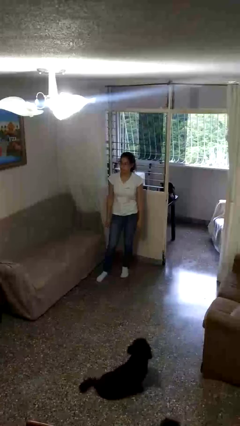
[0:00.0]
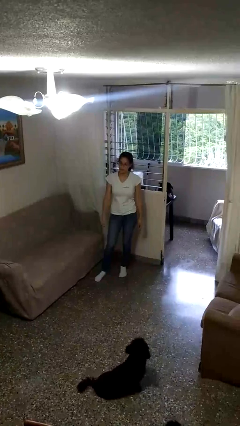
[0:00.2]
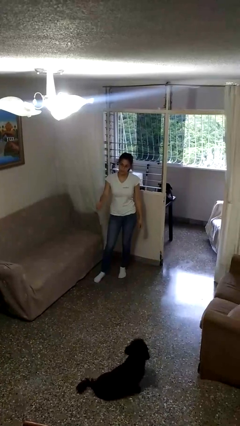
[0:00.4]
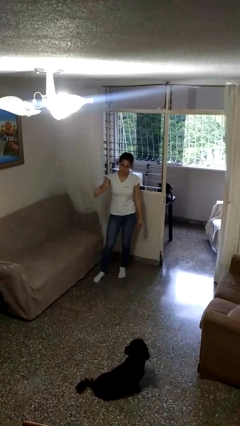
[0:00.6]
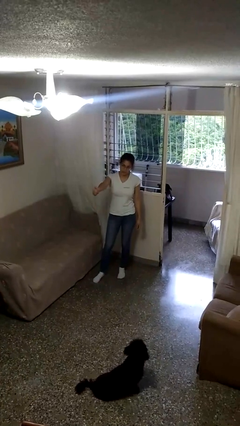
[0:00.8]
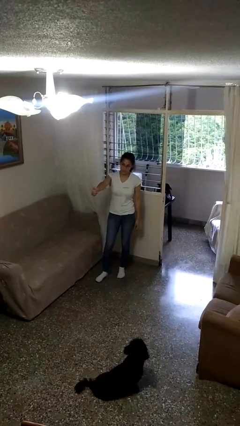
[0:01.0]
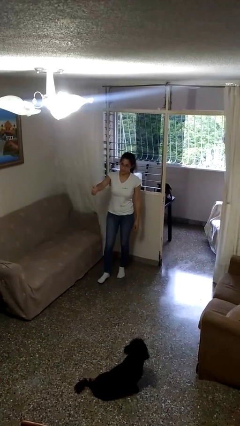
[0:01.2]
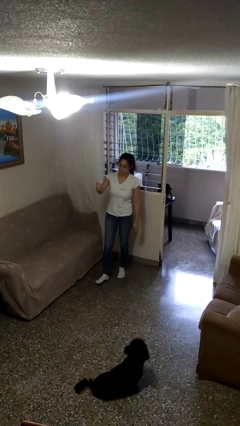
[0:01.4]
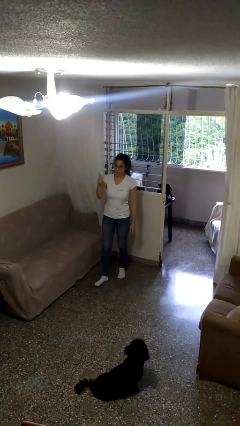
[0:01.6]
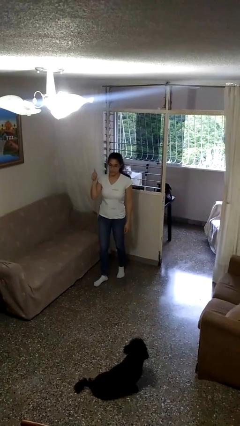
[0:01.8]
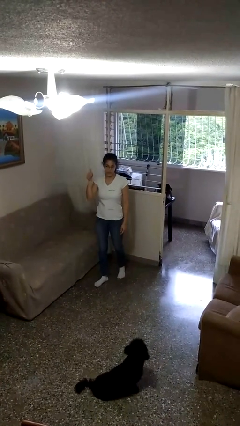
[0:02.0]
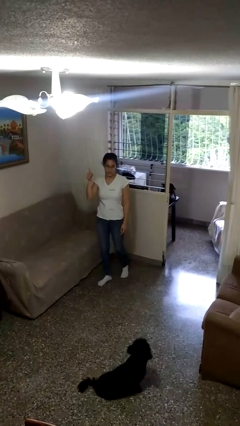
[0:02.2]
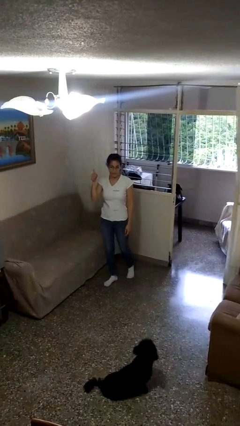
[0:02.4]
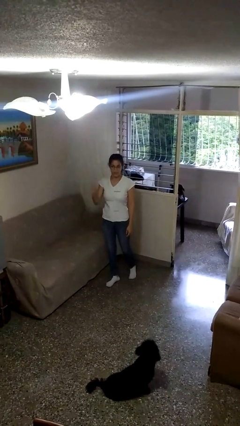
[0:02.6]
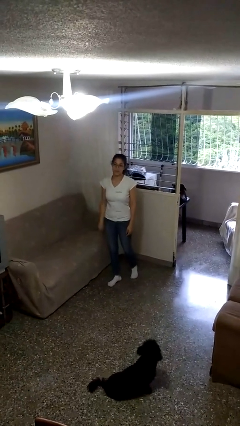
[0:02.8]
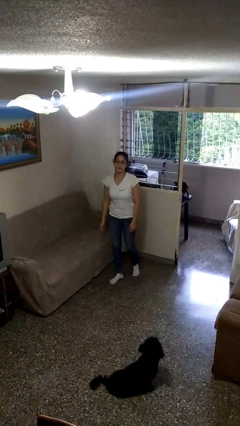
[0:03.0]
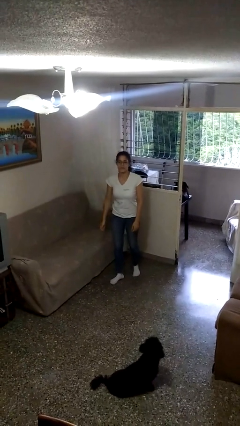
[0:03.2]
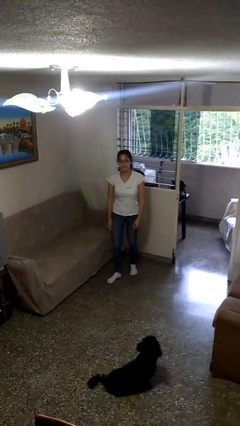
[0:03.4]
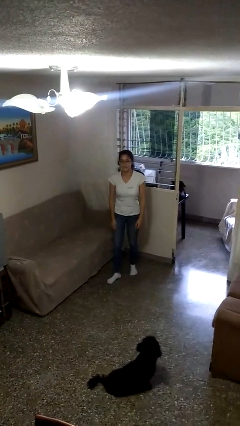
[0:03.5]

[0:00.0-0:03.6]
person gestures thumbs up

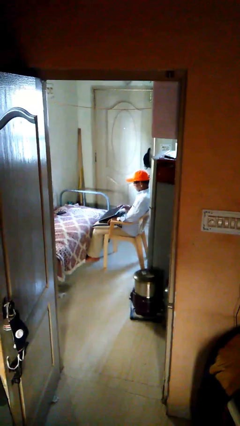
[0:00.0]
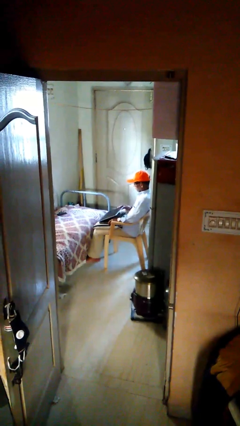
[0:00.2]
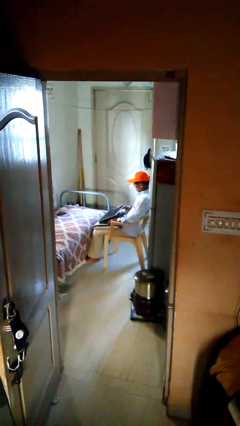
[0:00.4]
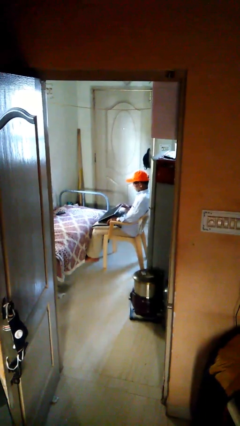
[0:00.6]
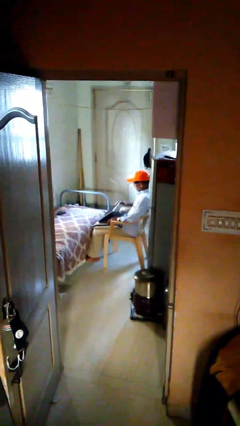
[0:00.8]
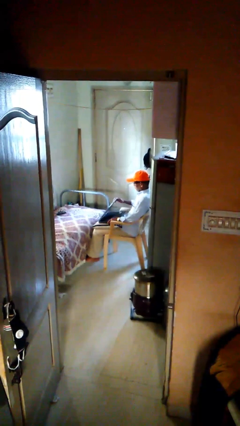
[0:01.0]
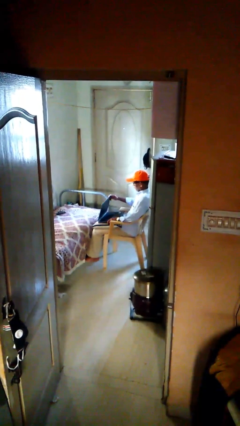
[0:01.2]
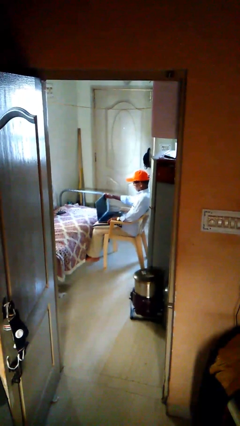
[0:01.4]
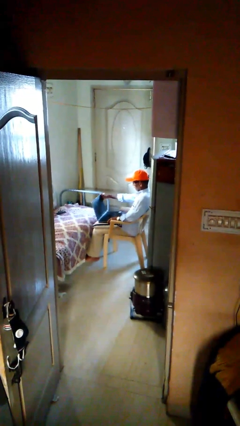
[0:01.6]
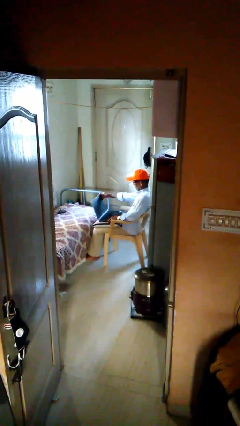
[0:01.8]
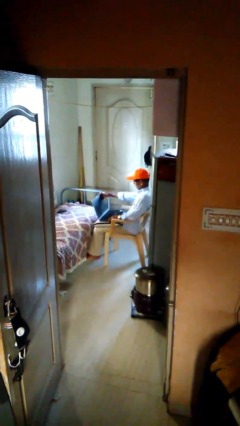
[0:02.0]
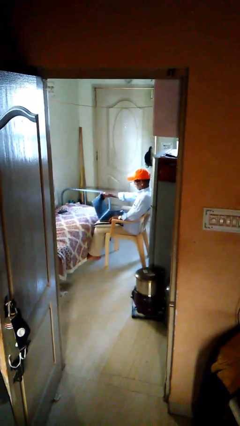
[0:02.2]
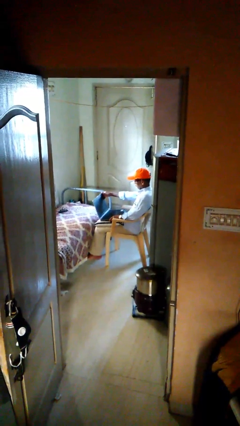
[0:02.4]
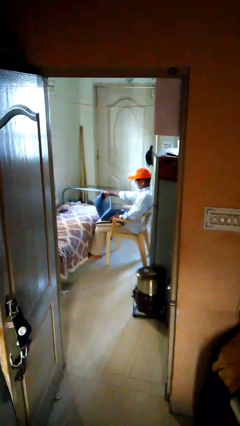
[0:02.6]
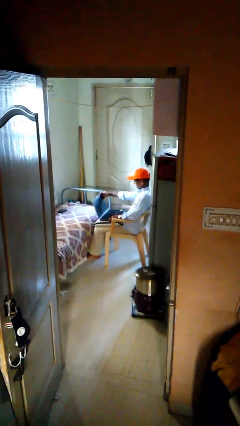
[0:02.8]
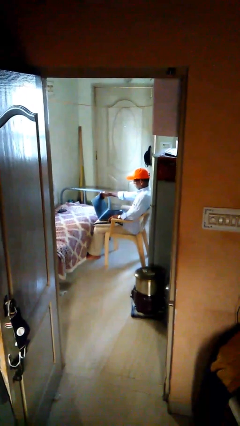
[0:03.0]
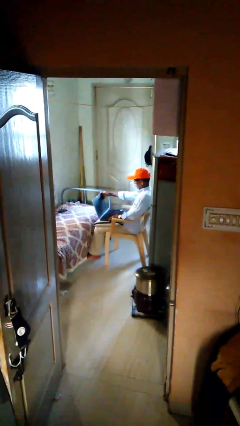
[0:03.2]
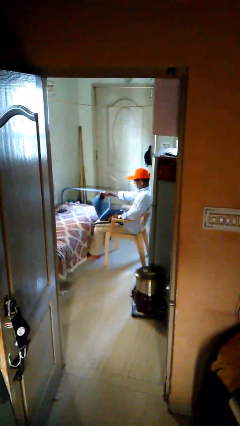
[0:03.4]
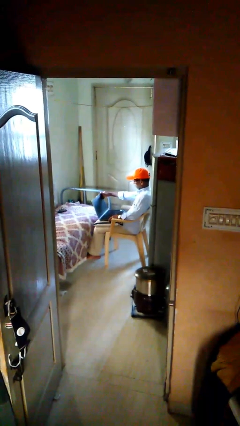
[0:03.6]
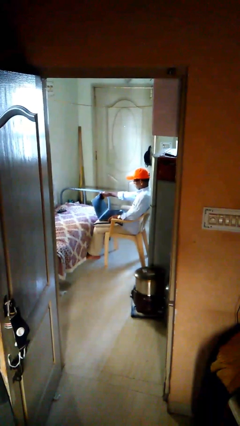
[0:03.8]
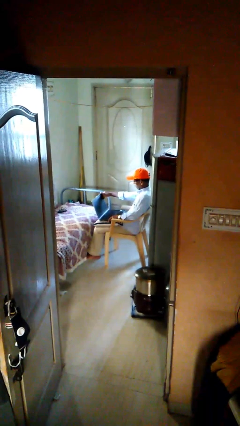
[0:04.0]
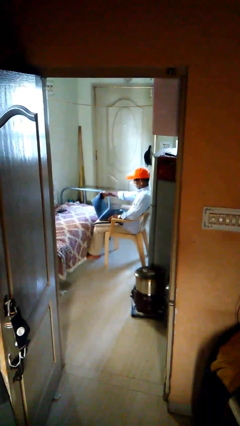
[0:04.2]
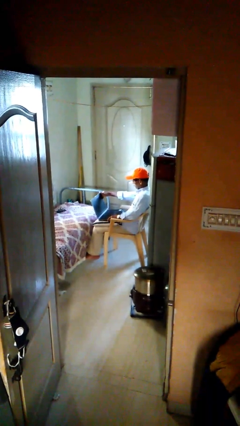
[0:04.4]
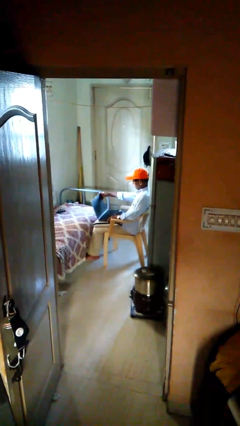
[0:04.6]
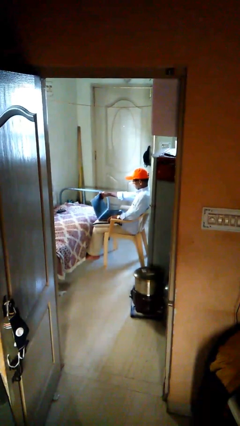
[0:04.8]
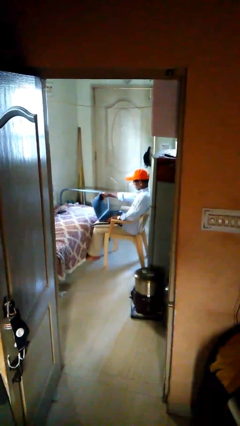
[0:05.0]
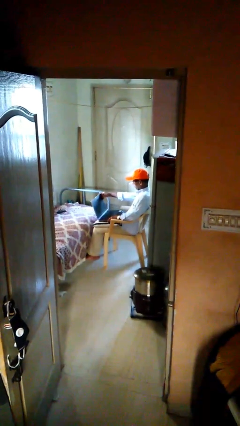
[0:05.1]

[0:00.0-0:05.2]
person interacts with laptop

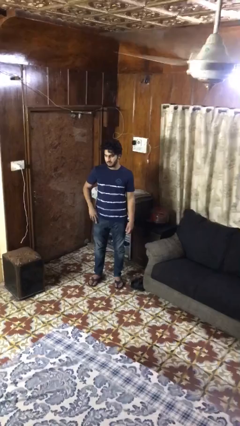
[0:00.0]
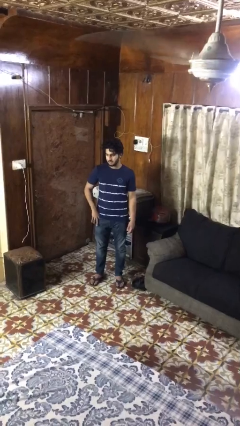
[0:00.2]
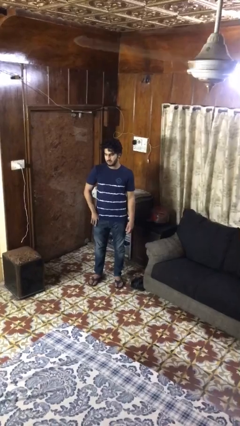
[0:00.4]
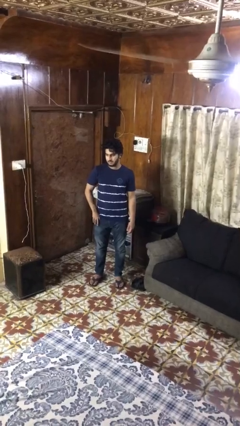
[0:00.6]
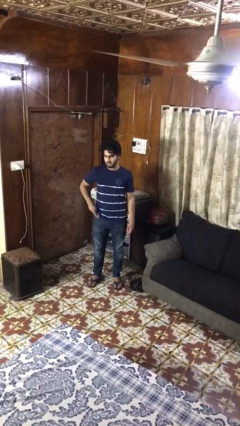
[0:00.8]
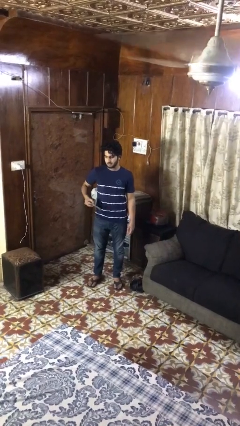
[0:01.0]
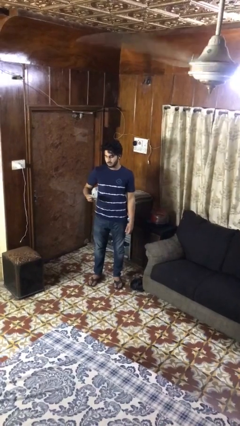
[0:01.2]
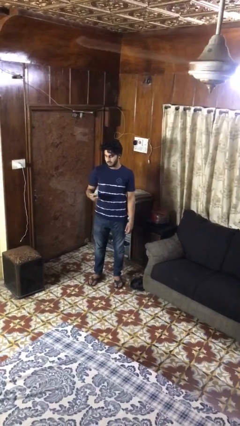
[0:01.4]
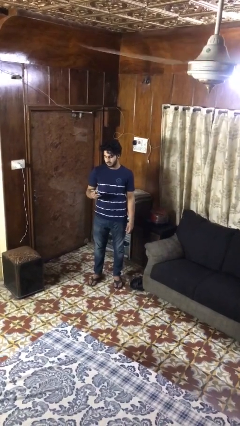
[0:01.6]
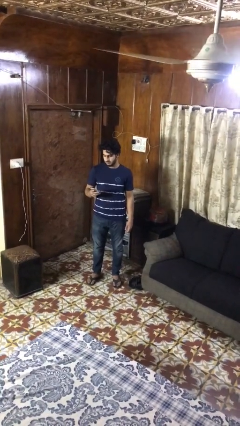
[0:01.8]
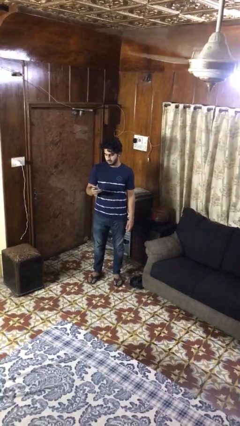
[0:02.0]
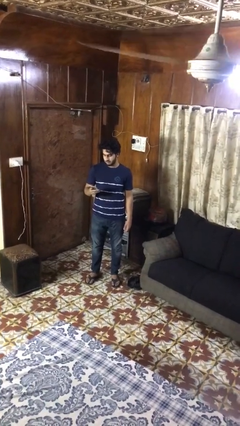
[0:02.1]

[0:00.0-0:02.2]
person takes phone from pocket

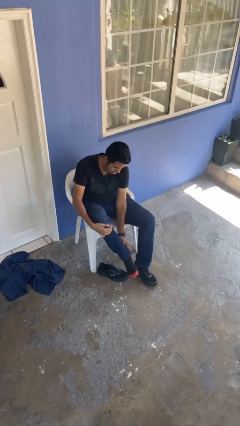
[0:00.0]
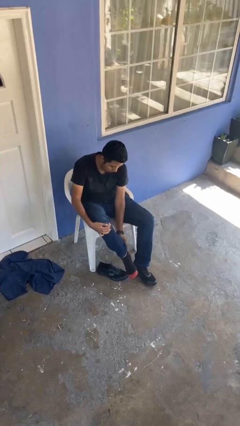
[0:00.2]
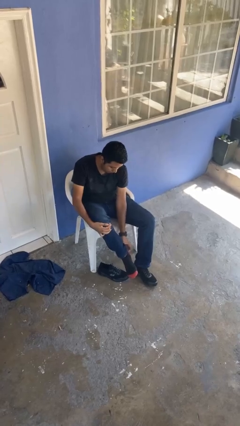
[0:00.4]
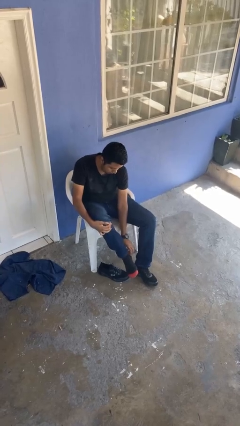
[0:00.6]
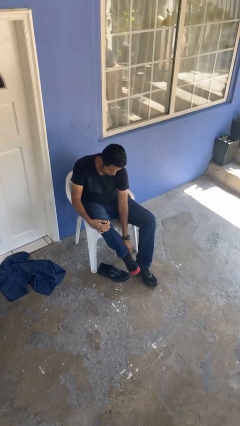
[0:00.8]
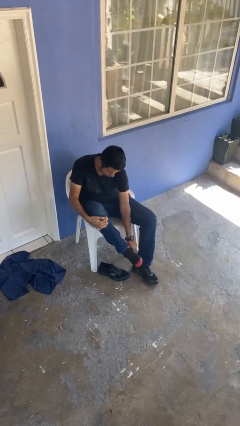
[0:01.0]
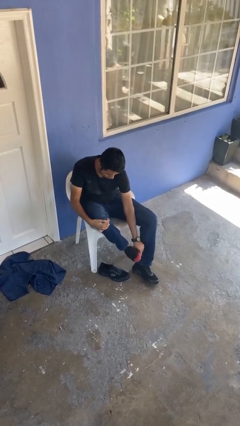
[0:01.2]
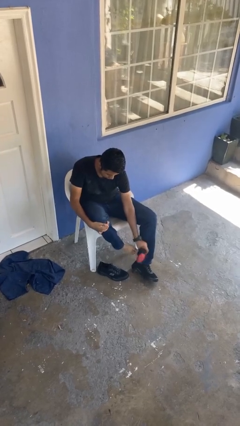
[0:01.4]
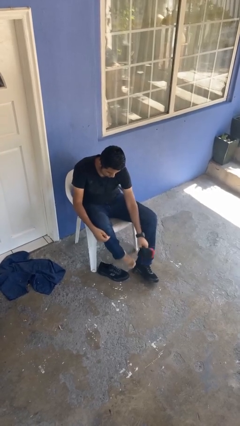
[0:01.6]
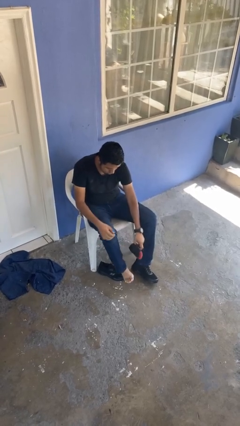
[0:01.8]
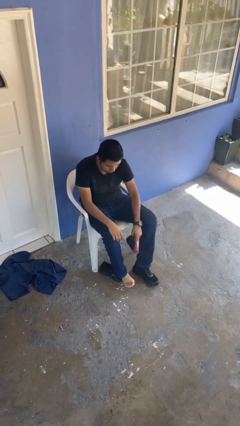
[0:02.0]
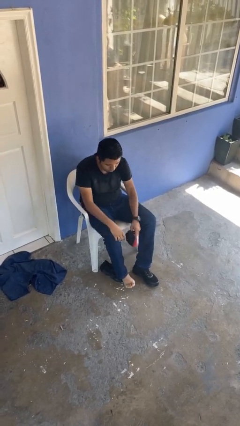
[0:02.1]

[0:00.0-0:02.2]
person puts on socks

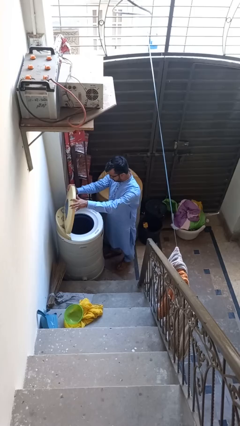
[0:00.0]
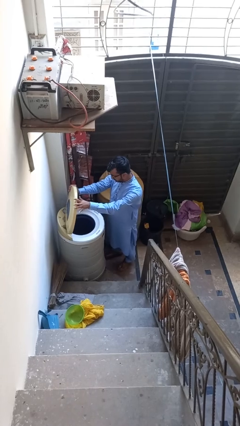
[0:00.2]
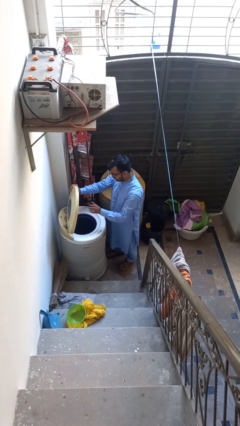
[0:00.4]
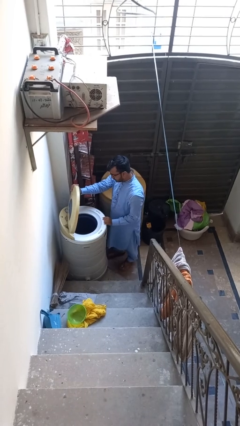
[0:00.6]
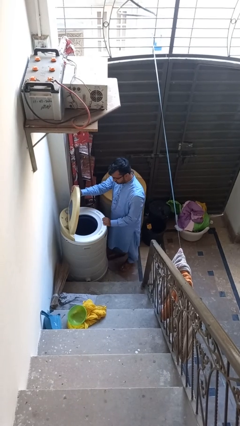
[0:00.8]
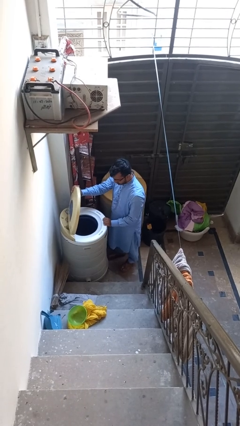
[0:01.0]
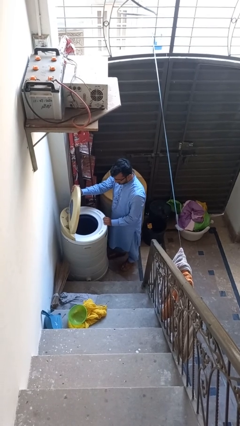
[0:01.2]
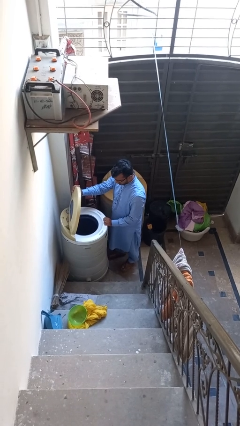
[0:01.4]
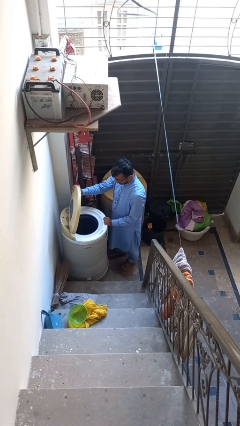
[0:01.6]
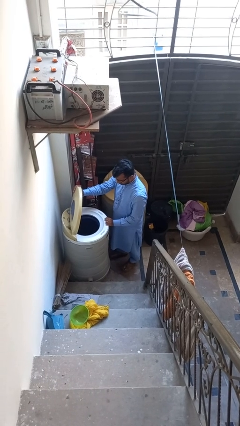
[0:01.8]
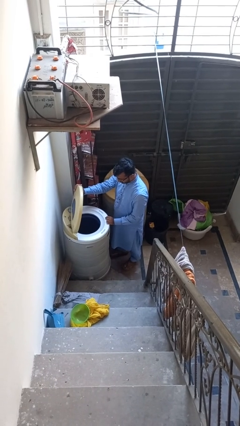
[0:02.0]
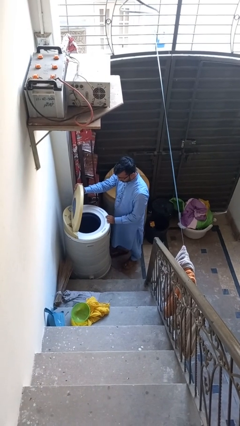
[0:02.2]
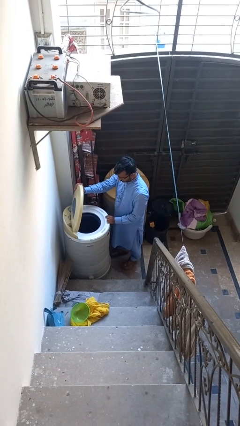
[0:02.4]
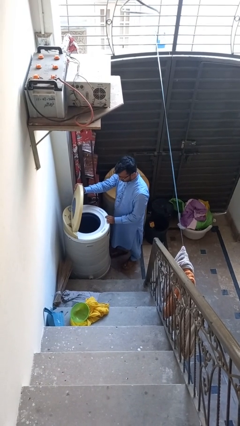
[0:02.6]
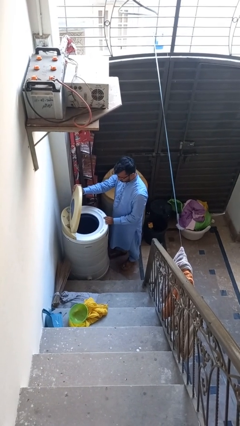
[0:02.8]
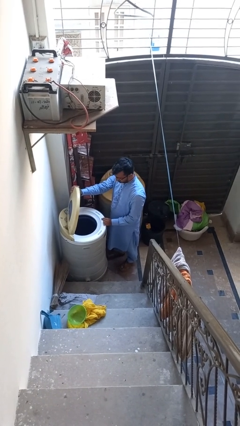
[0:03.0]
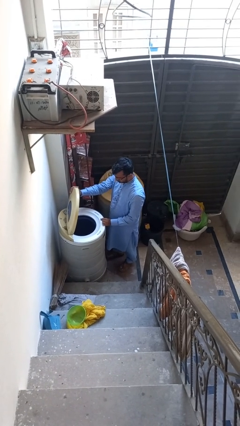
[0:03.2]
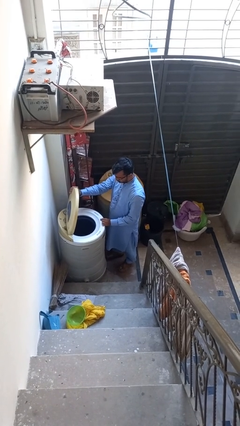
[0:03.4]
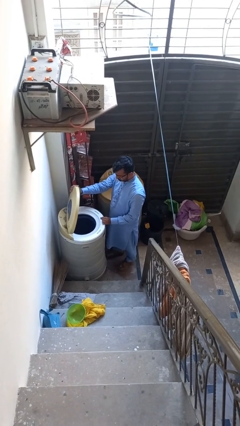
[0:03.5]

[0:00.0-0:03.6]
person opens clothes washer

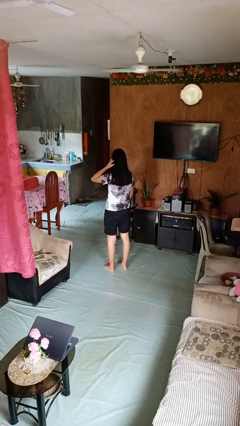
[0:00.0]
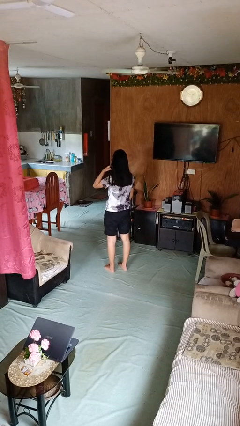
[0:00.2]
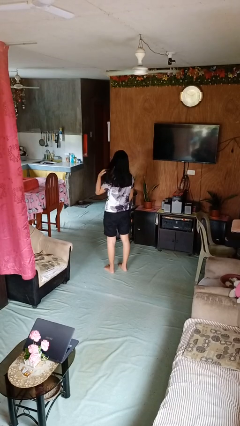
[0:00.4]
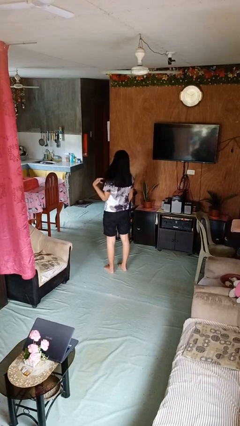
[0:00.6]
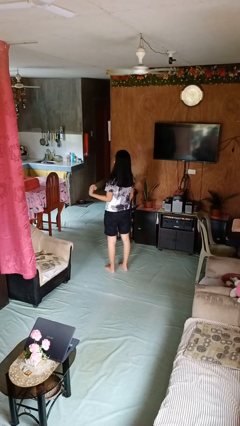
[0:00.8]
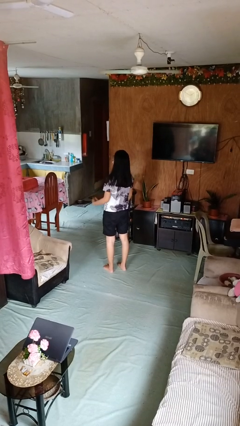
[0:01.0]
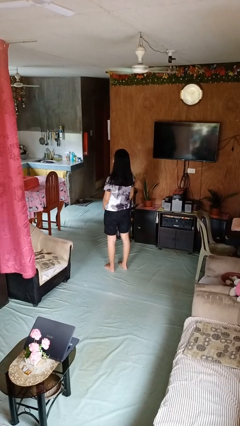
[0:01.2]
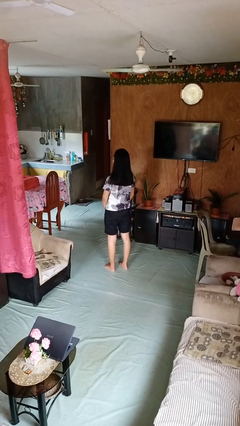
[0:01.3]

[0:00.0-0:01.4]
person strokes hair
